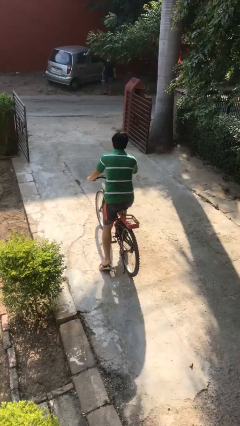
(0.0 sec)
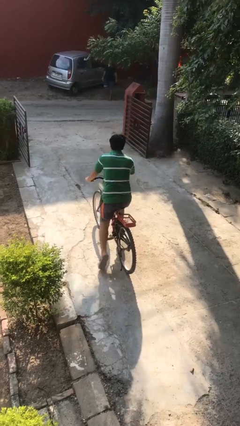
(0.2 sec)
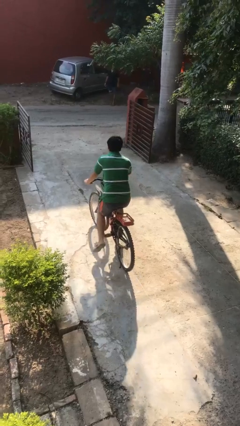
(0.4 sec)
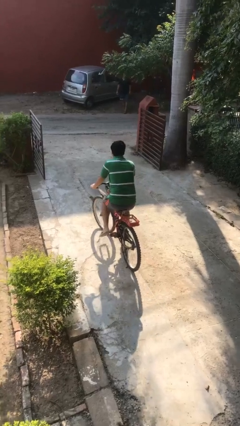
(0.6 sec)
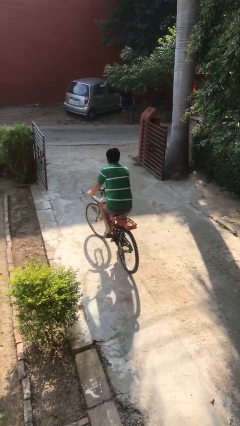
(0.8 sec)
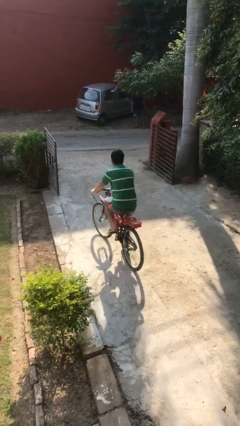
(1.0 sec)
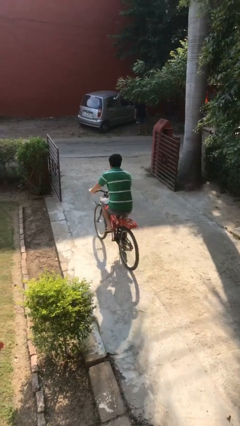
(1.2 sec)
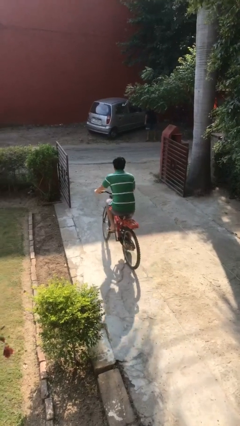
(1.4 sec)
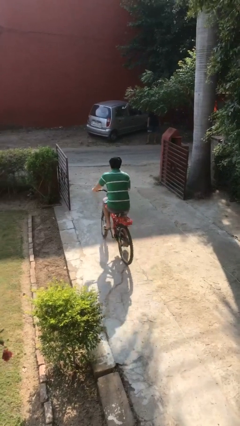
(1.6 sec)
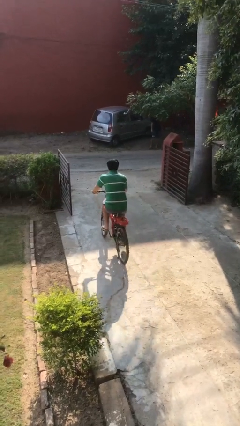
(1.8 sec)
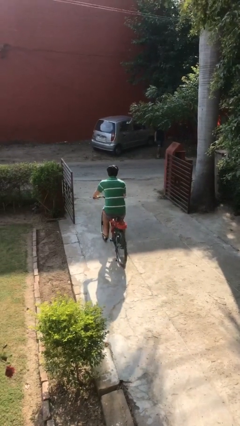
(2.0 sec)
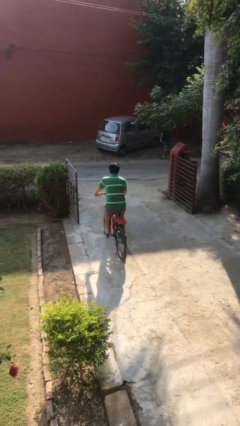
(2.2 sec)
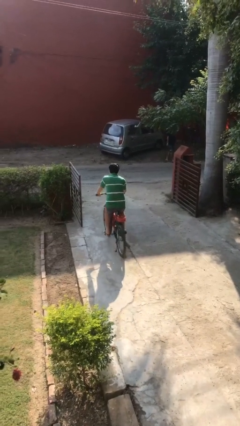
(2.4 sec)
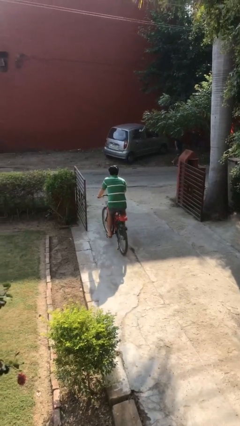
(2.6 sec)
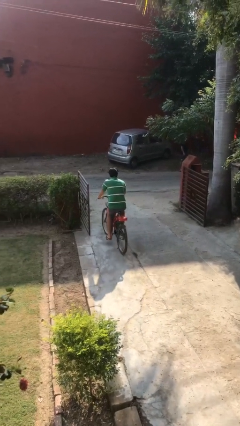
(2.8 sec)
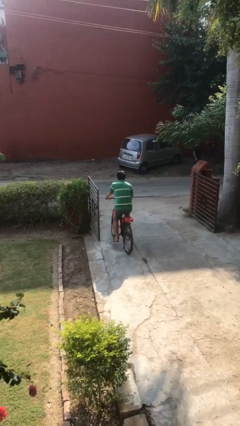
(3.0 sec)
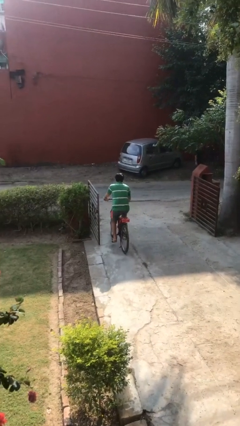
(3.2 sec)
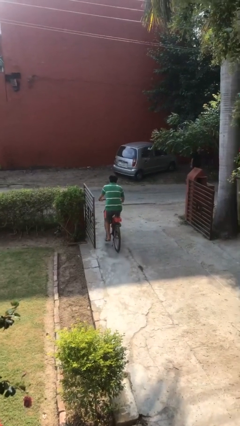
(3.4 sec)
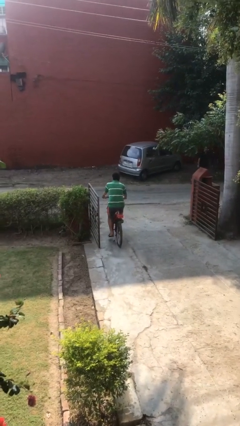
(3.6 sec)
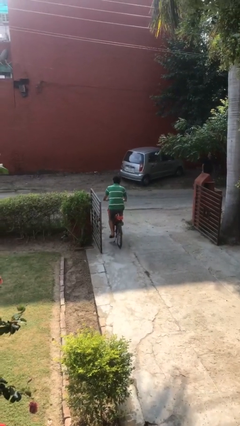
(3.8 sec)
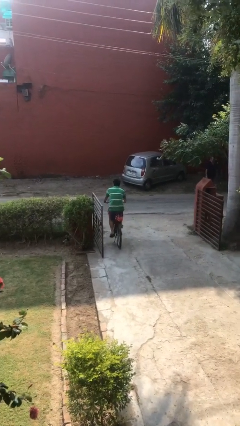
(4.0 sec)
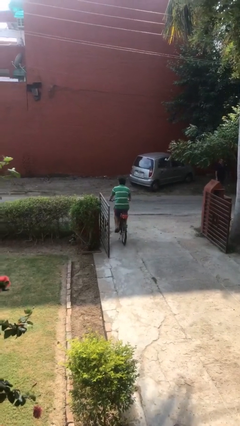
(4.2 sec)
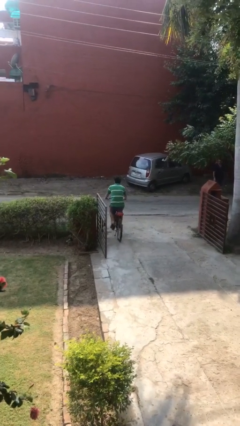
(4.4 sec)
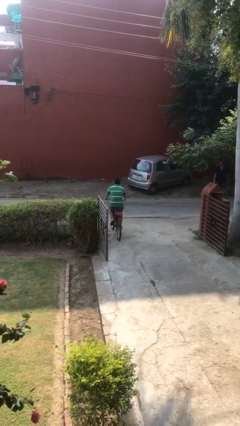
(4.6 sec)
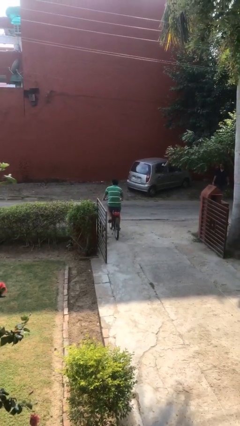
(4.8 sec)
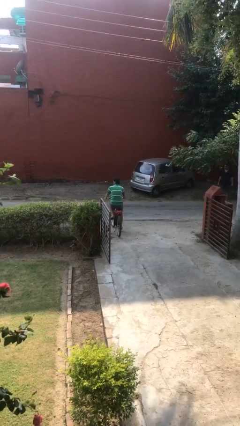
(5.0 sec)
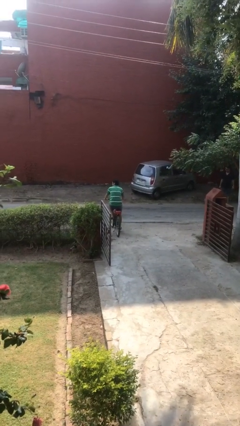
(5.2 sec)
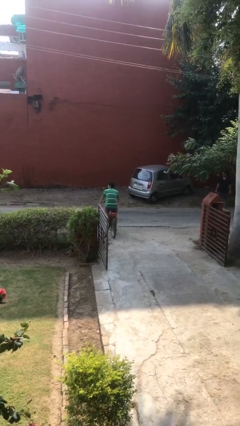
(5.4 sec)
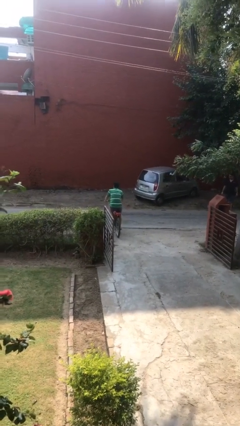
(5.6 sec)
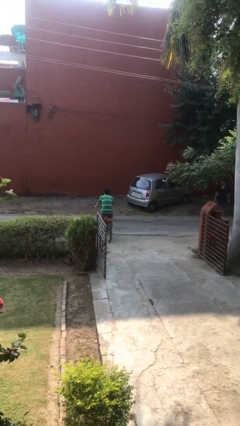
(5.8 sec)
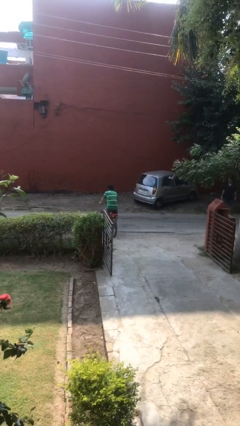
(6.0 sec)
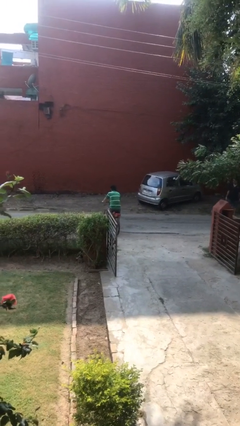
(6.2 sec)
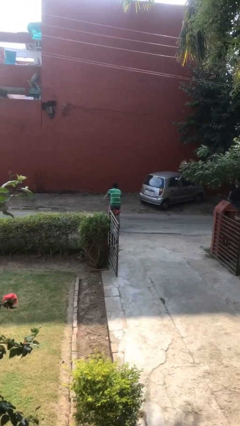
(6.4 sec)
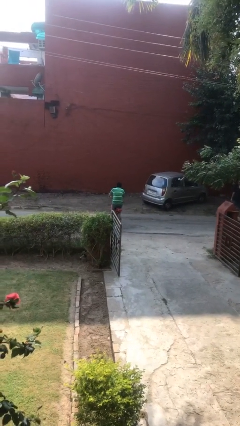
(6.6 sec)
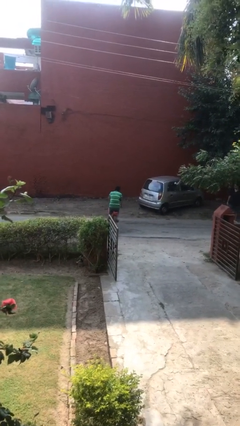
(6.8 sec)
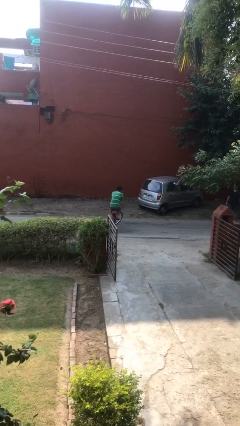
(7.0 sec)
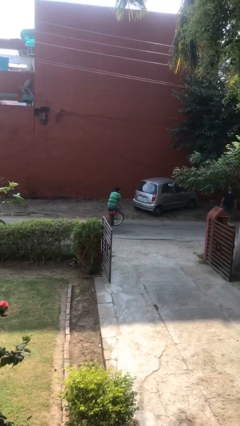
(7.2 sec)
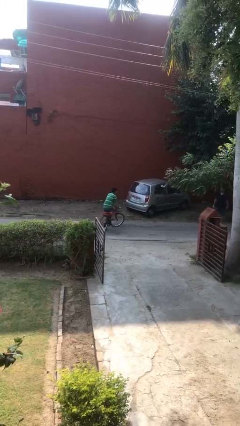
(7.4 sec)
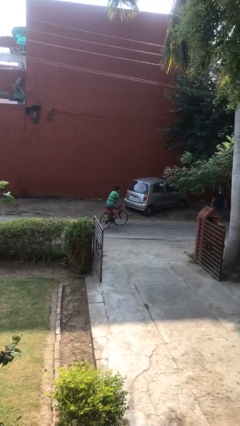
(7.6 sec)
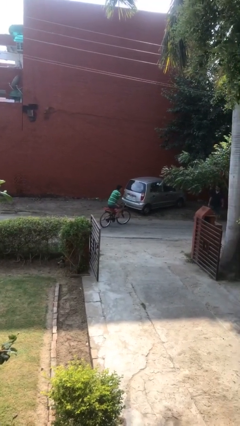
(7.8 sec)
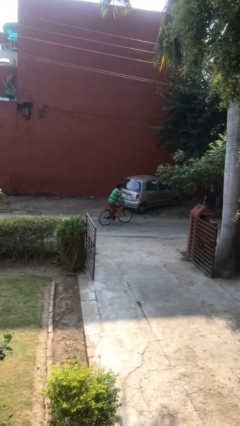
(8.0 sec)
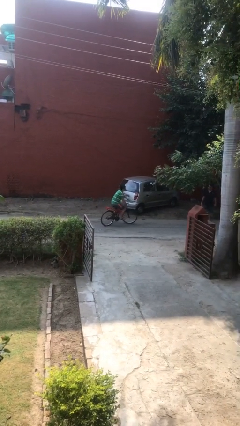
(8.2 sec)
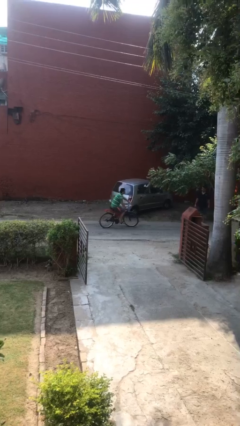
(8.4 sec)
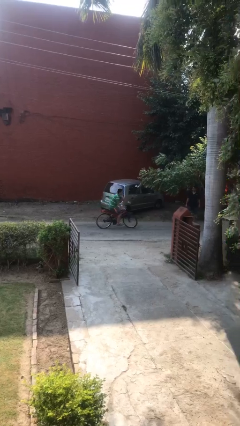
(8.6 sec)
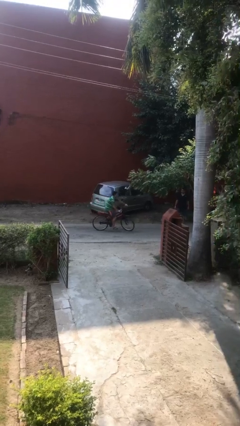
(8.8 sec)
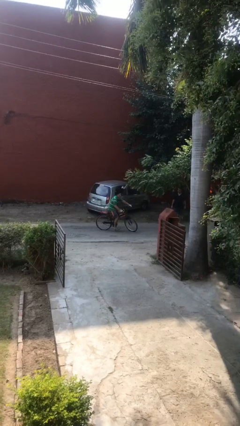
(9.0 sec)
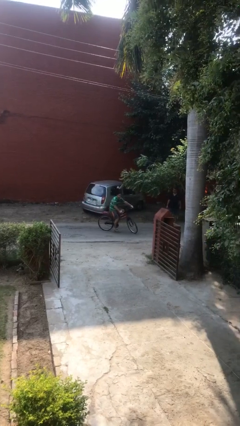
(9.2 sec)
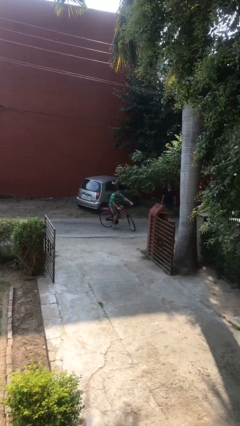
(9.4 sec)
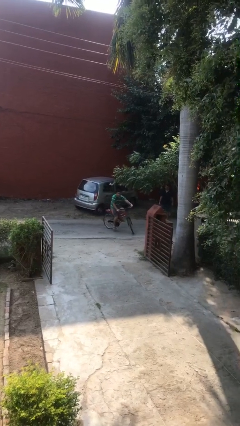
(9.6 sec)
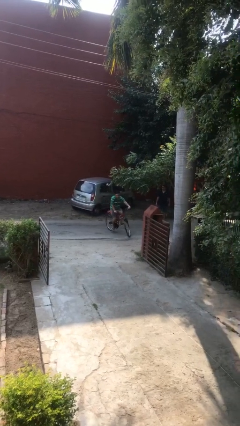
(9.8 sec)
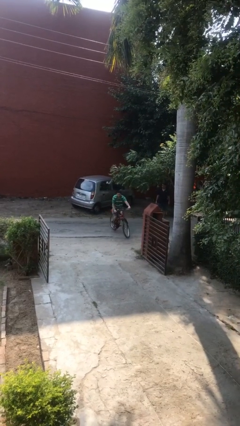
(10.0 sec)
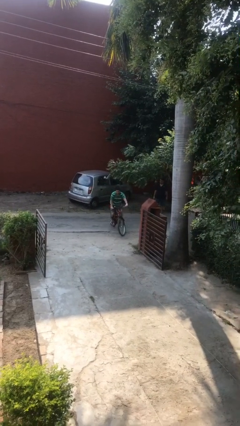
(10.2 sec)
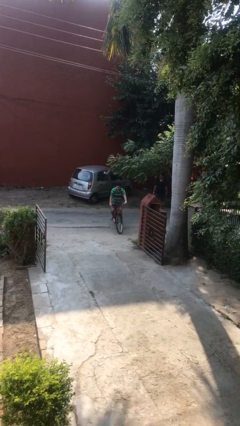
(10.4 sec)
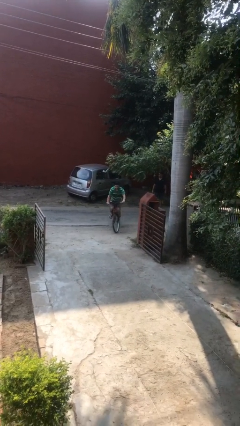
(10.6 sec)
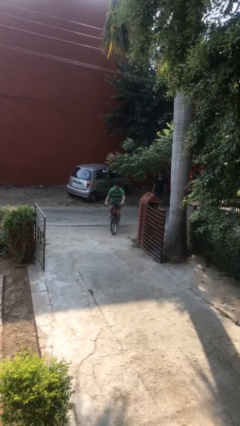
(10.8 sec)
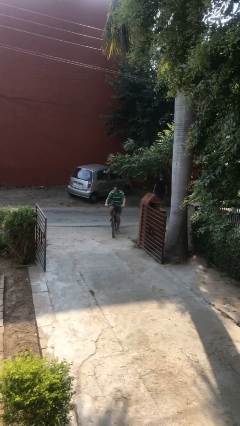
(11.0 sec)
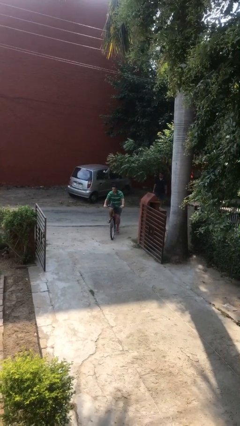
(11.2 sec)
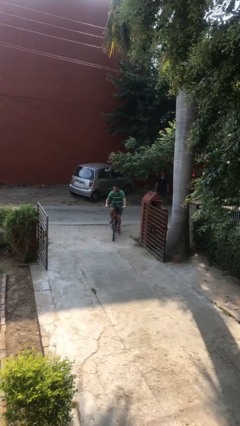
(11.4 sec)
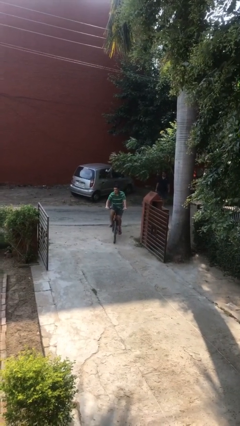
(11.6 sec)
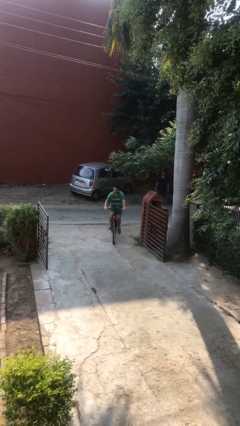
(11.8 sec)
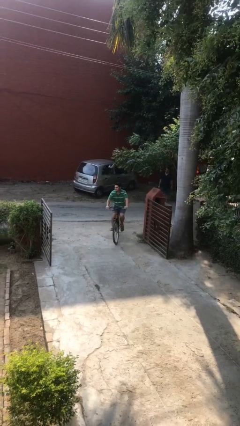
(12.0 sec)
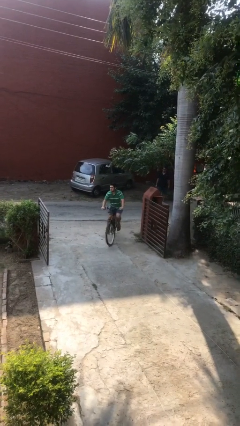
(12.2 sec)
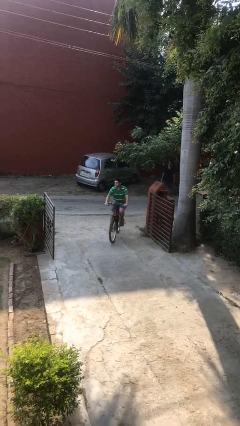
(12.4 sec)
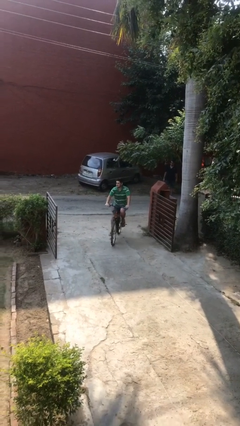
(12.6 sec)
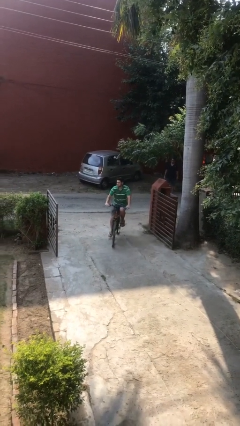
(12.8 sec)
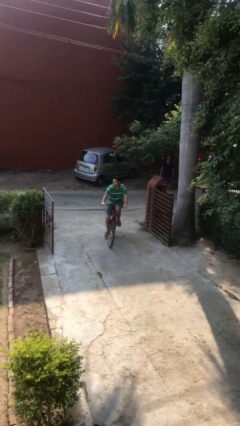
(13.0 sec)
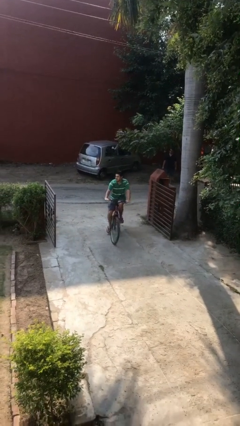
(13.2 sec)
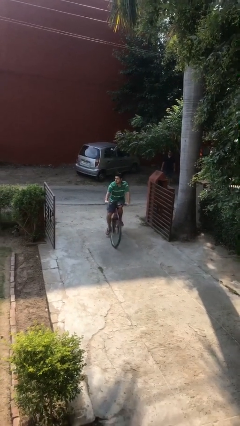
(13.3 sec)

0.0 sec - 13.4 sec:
person rides bicycle

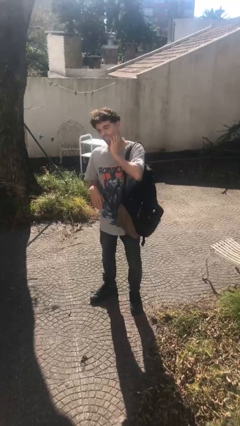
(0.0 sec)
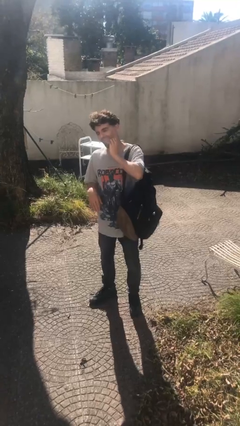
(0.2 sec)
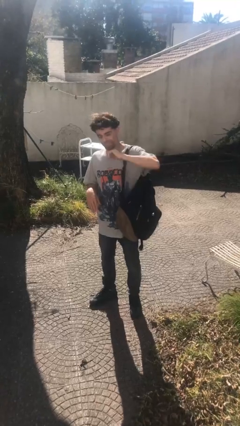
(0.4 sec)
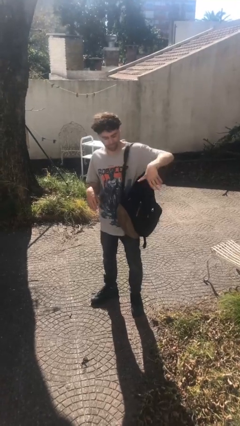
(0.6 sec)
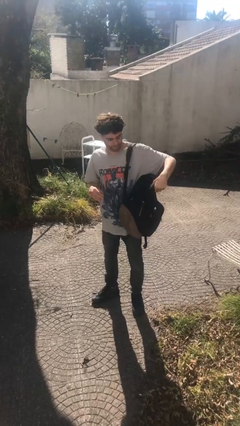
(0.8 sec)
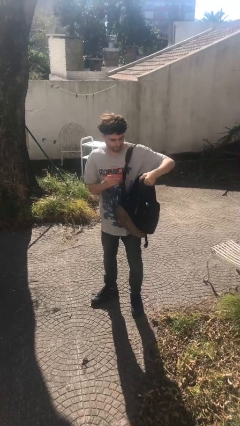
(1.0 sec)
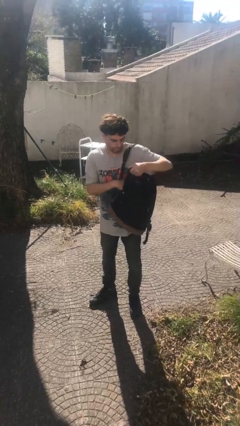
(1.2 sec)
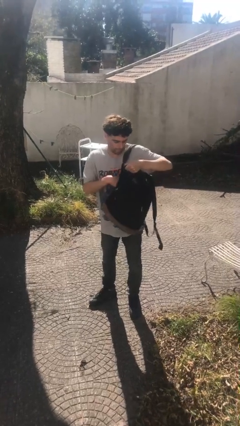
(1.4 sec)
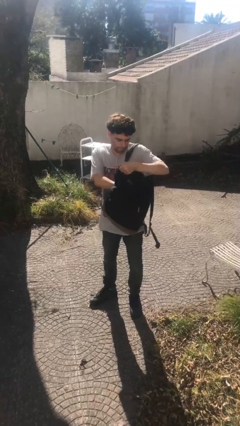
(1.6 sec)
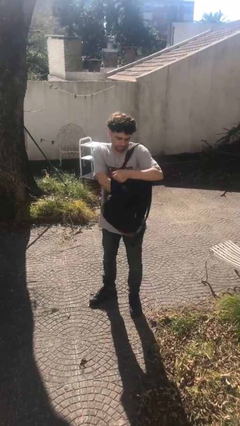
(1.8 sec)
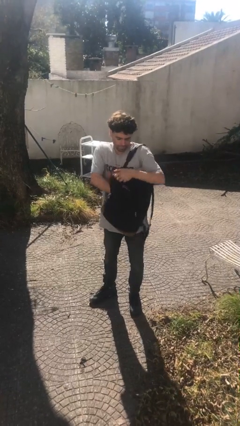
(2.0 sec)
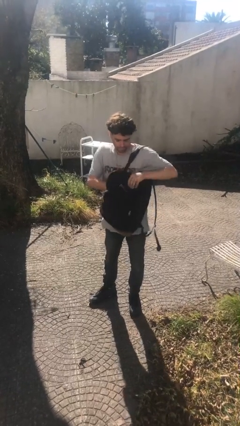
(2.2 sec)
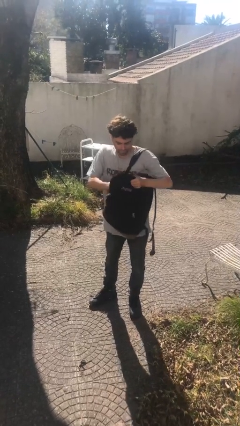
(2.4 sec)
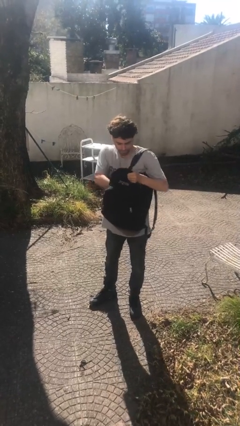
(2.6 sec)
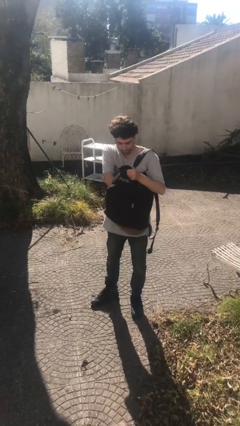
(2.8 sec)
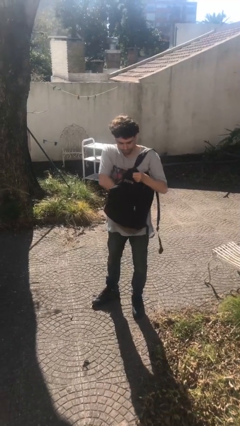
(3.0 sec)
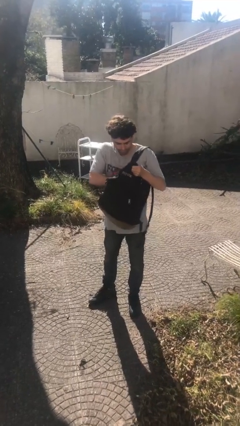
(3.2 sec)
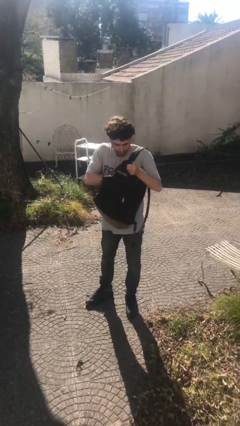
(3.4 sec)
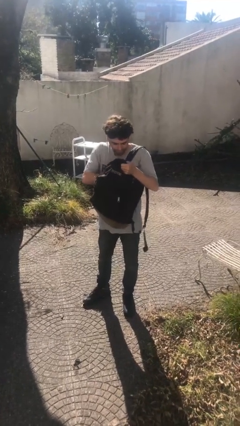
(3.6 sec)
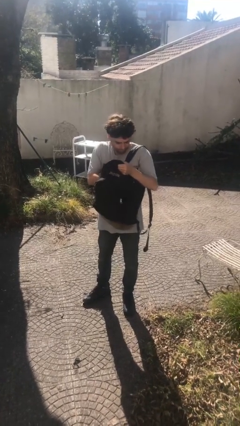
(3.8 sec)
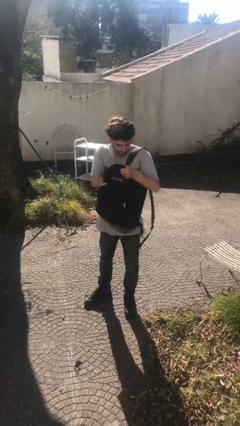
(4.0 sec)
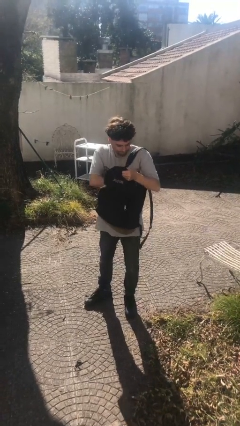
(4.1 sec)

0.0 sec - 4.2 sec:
person searches in backpack

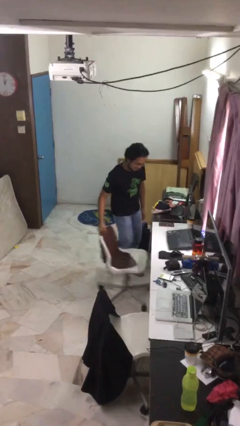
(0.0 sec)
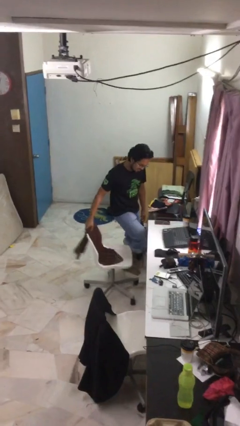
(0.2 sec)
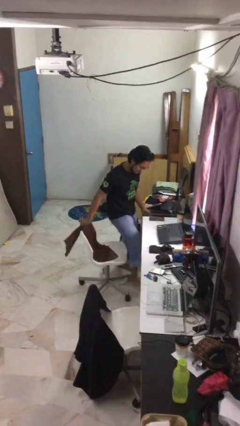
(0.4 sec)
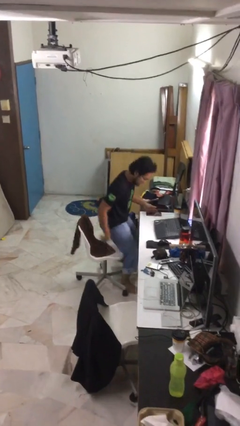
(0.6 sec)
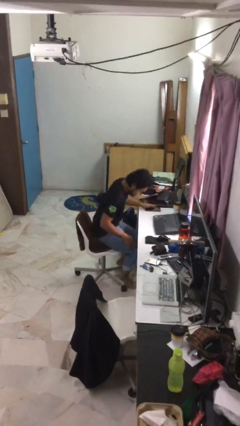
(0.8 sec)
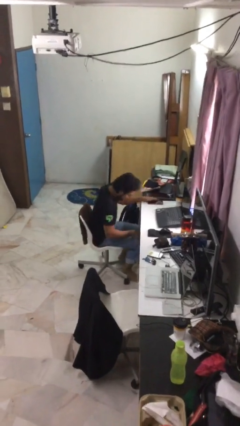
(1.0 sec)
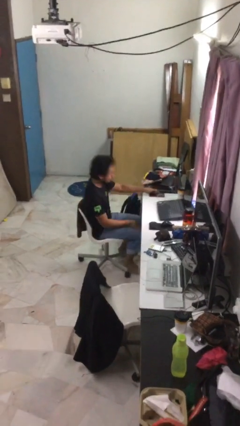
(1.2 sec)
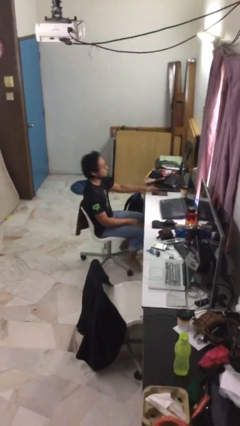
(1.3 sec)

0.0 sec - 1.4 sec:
person sits down
